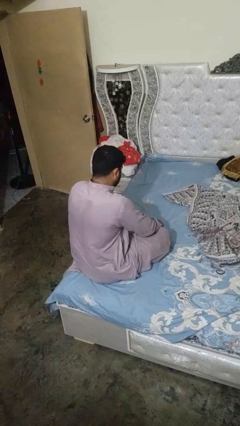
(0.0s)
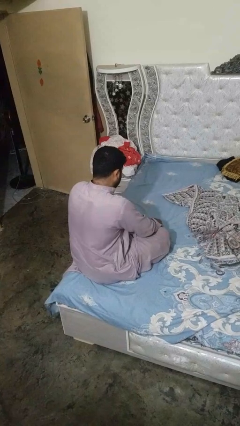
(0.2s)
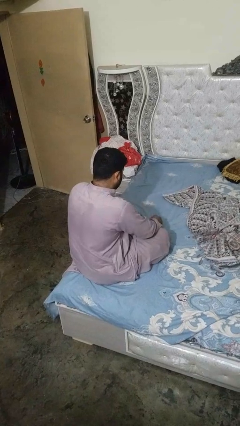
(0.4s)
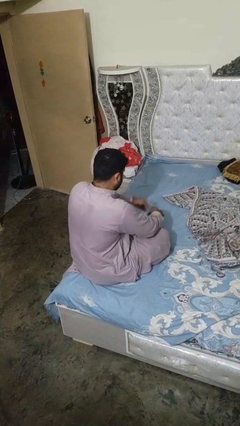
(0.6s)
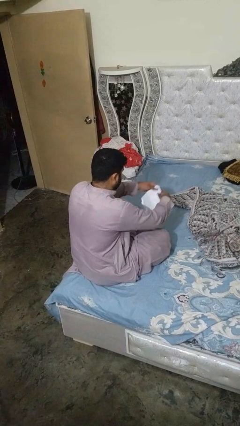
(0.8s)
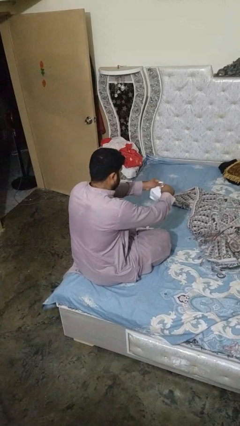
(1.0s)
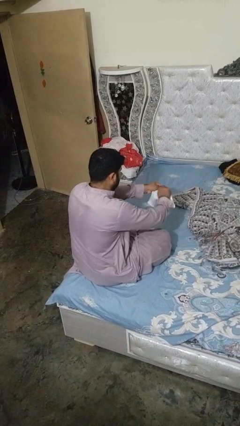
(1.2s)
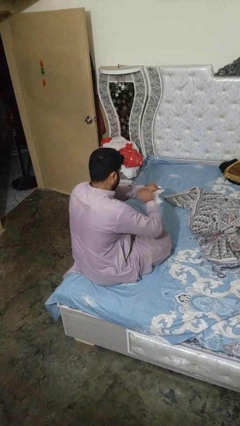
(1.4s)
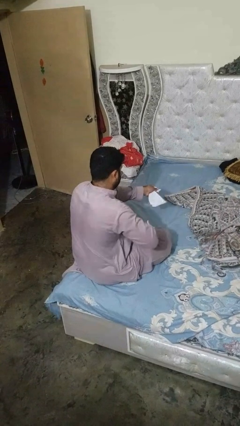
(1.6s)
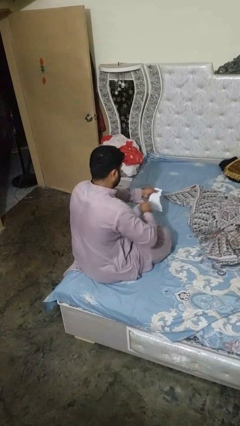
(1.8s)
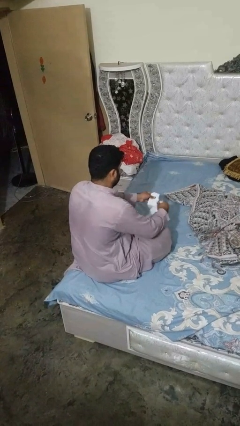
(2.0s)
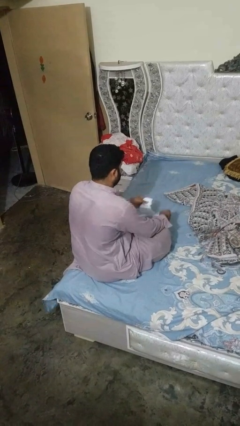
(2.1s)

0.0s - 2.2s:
person tears paper

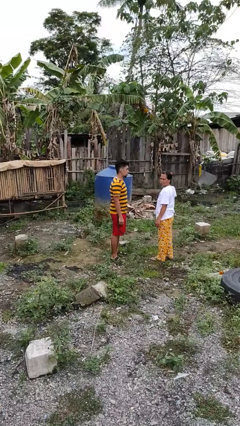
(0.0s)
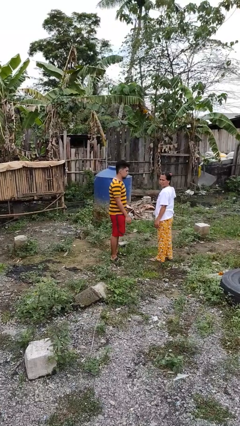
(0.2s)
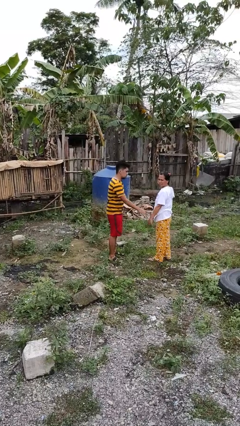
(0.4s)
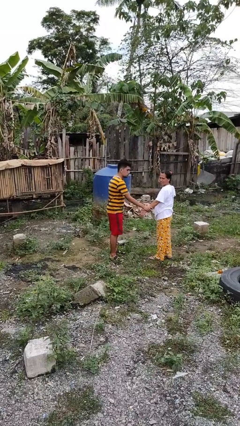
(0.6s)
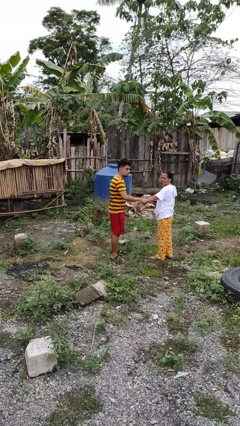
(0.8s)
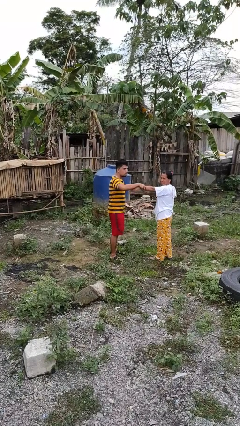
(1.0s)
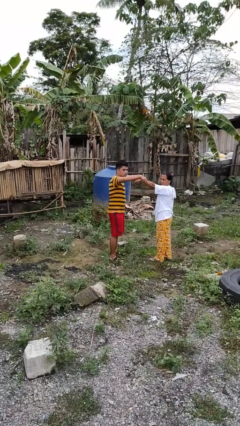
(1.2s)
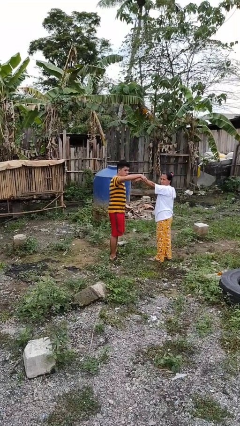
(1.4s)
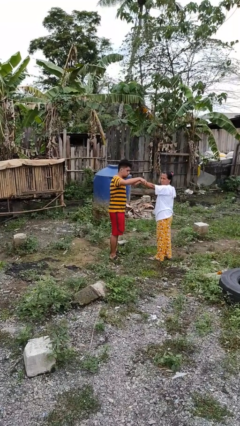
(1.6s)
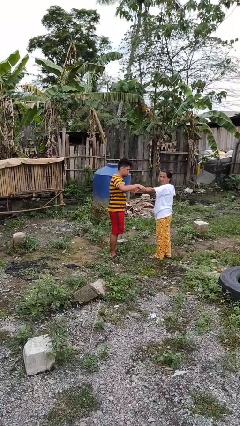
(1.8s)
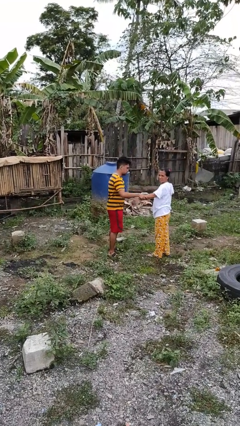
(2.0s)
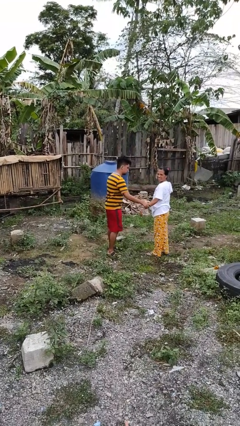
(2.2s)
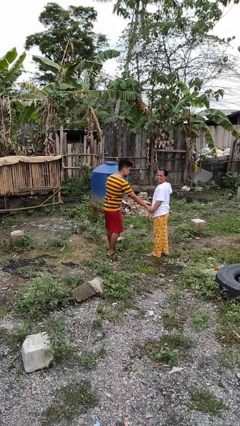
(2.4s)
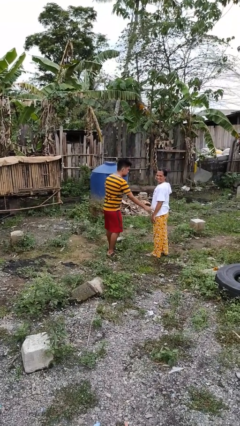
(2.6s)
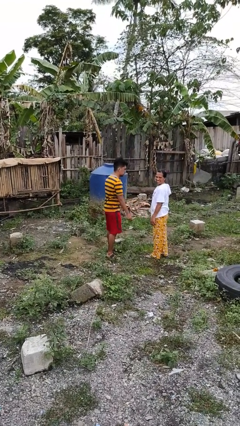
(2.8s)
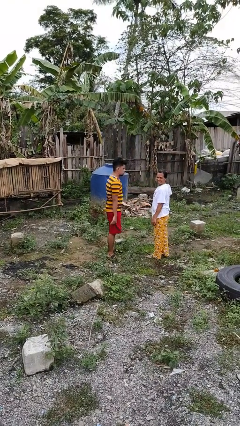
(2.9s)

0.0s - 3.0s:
person grabs person by forearm

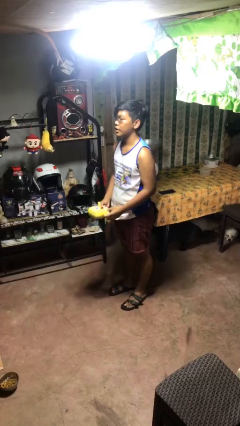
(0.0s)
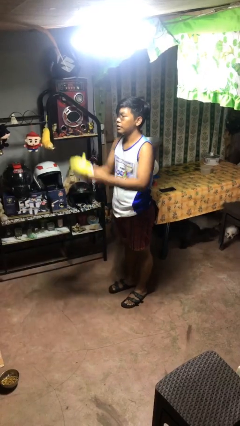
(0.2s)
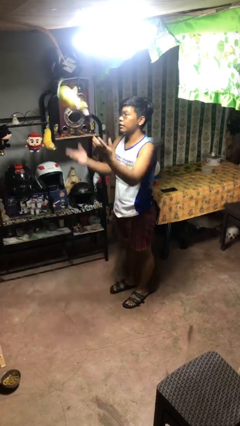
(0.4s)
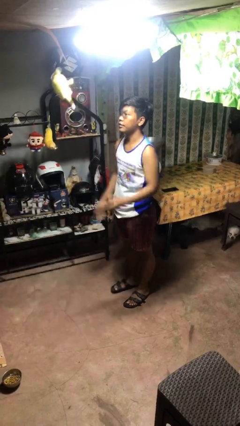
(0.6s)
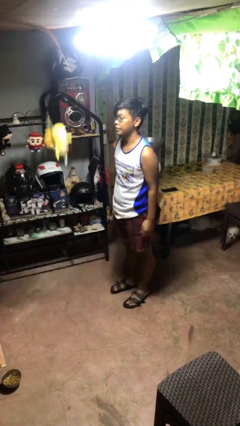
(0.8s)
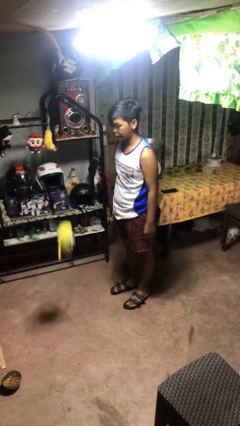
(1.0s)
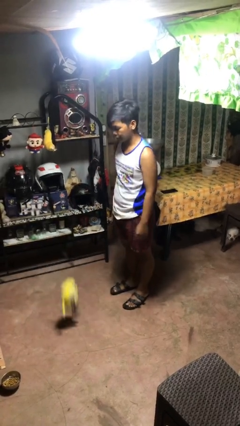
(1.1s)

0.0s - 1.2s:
person throws object into air

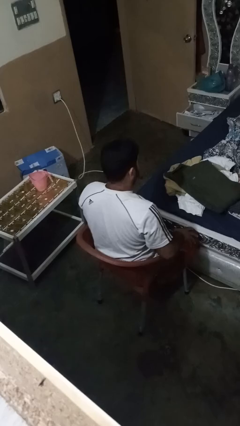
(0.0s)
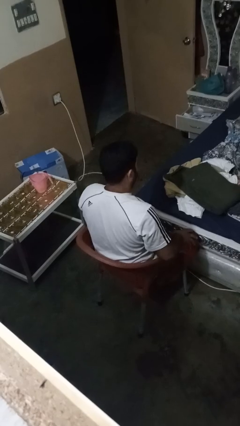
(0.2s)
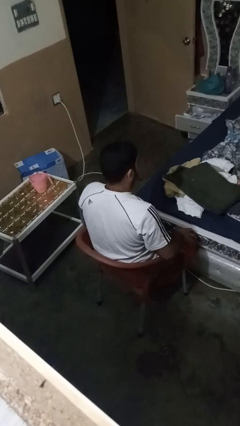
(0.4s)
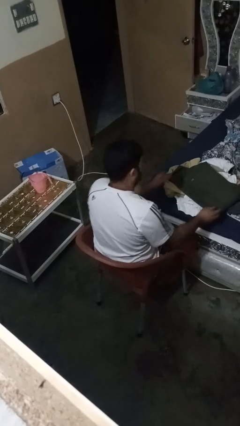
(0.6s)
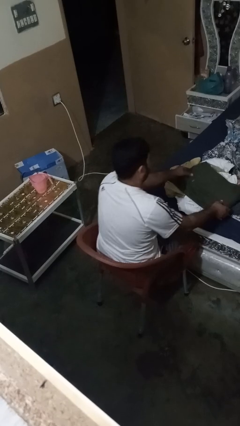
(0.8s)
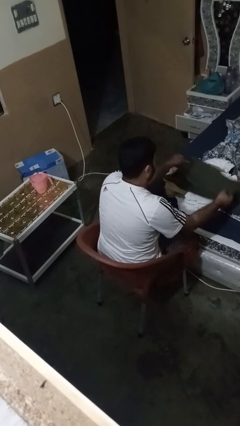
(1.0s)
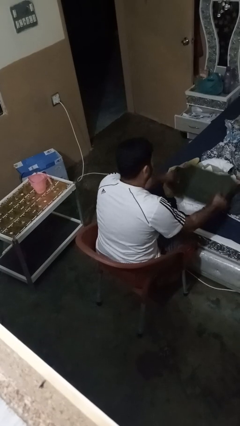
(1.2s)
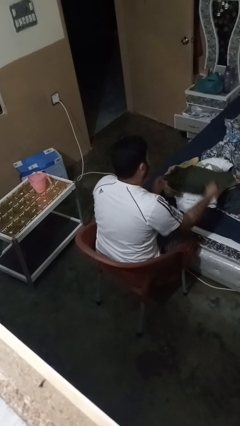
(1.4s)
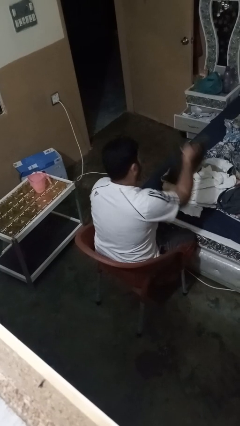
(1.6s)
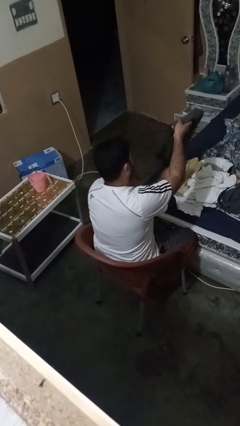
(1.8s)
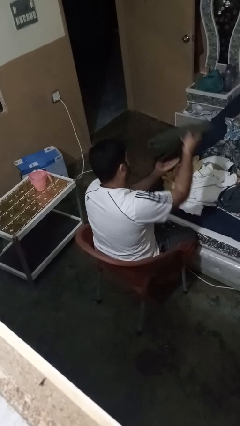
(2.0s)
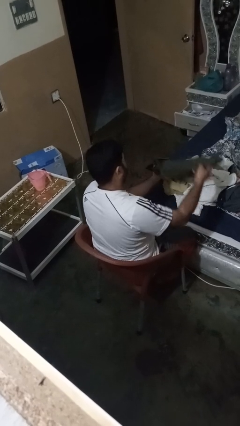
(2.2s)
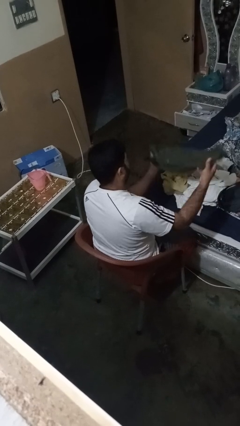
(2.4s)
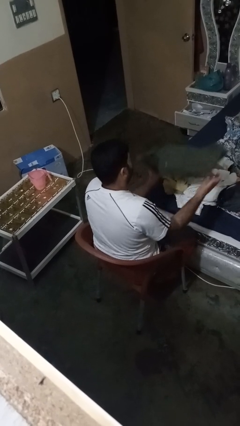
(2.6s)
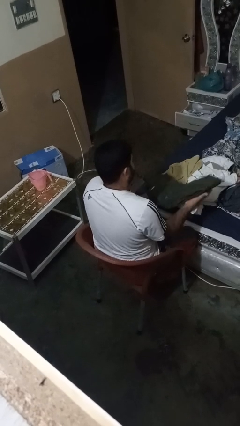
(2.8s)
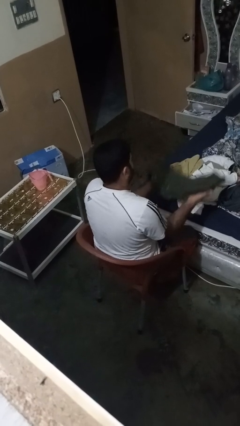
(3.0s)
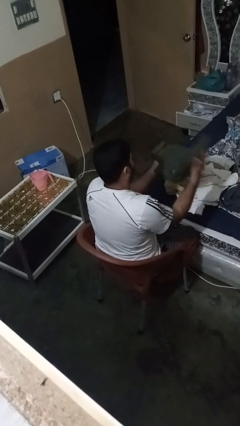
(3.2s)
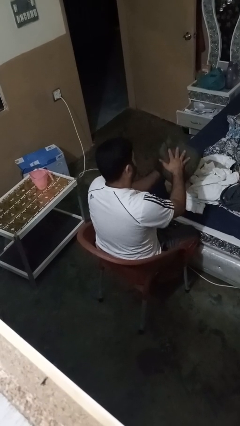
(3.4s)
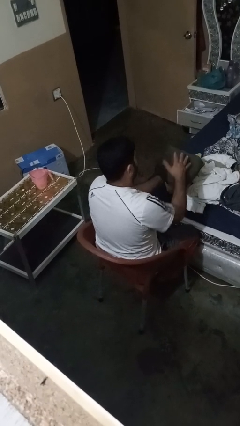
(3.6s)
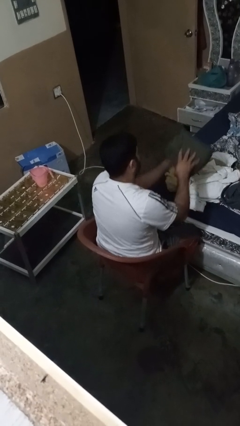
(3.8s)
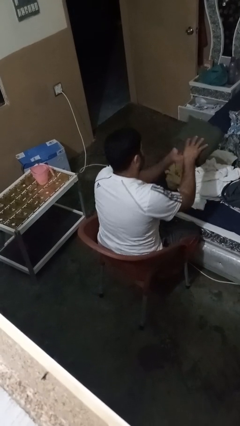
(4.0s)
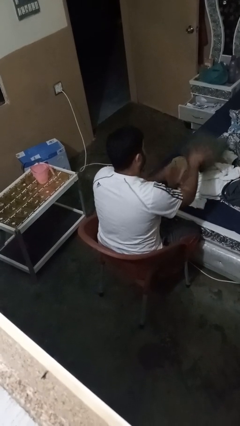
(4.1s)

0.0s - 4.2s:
person folds pants

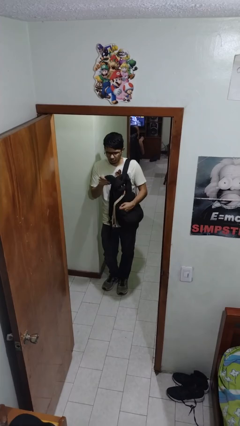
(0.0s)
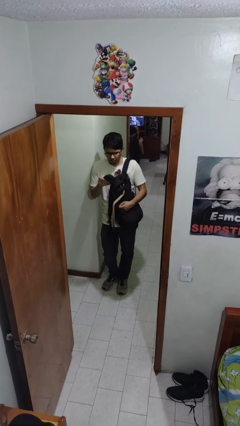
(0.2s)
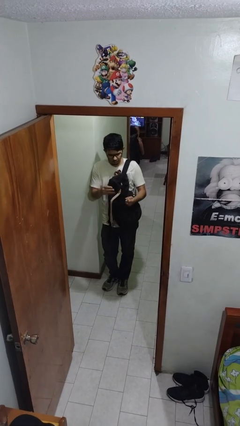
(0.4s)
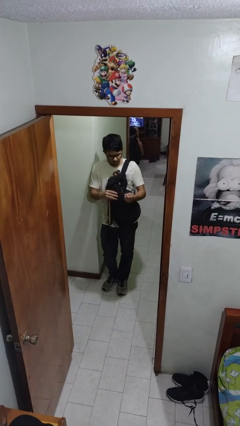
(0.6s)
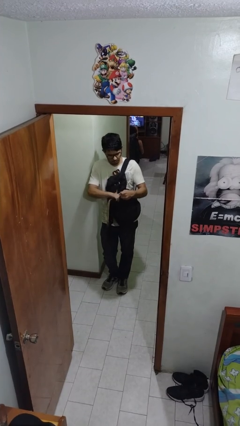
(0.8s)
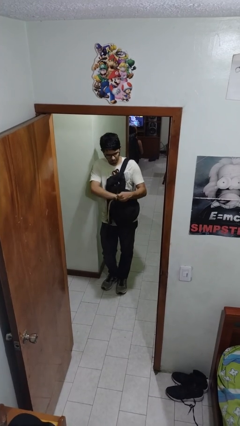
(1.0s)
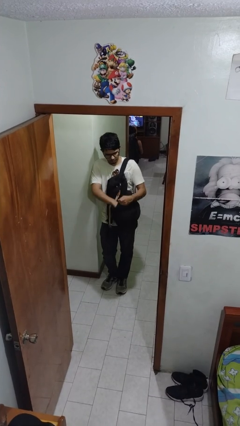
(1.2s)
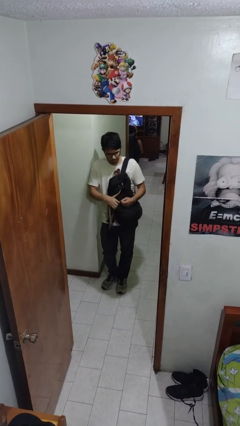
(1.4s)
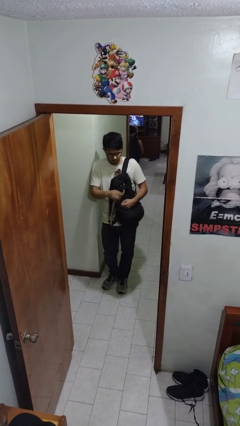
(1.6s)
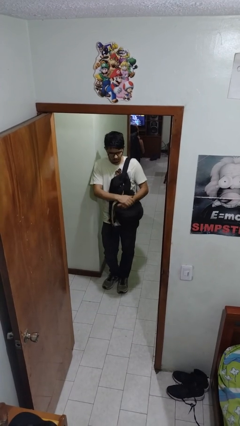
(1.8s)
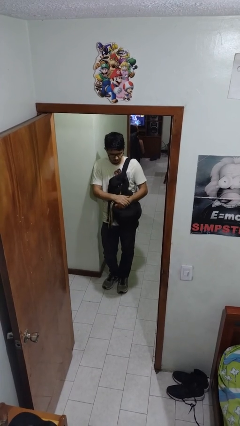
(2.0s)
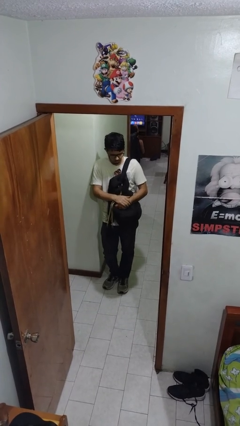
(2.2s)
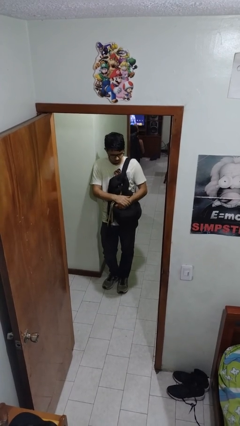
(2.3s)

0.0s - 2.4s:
person puts object into backpack

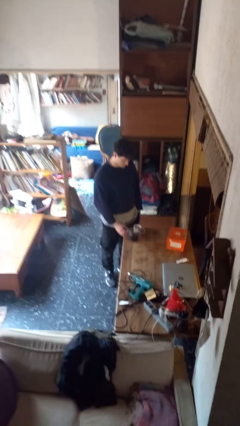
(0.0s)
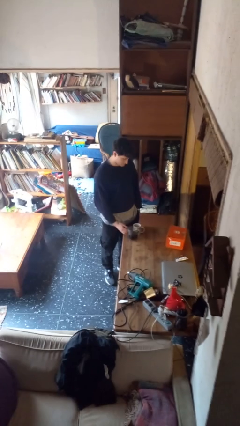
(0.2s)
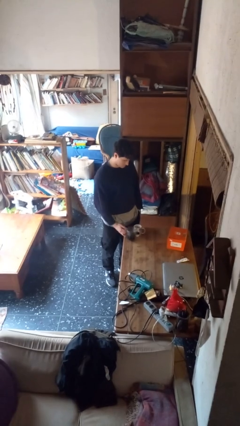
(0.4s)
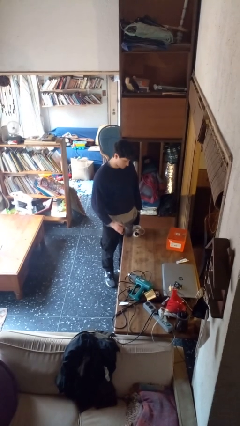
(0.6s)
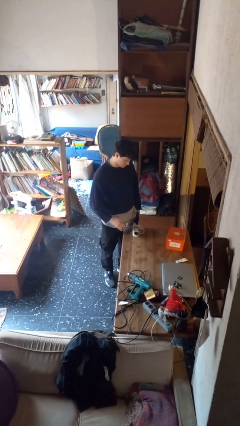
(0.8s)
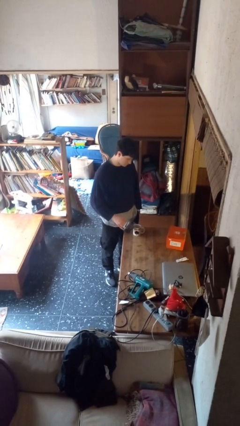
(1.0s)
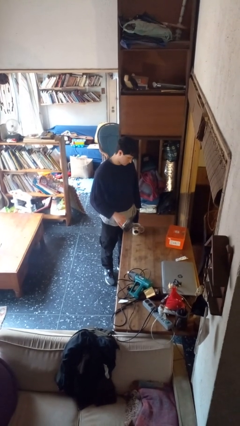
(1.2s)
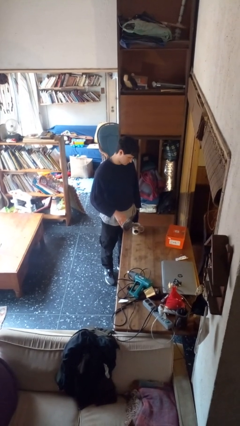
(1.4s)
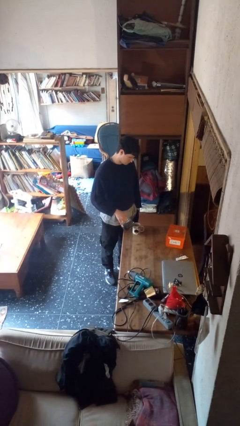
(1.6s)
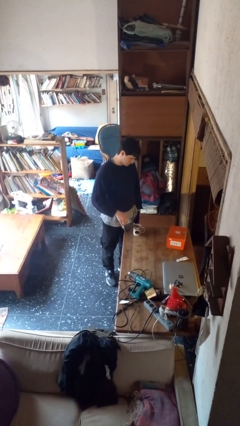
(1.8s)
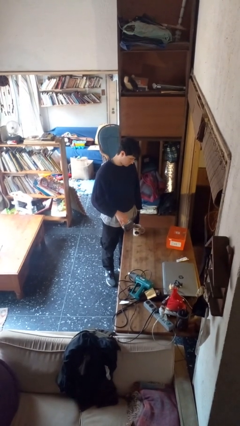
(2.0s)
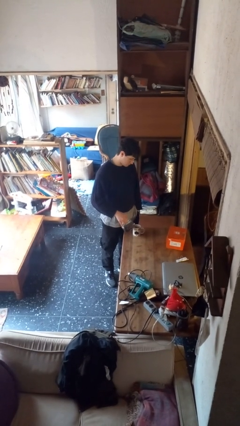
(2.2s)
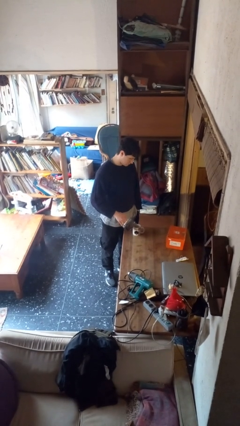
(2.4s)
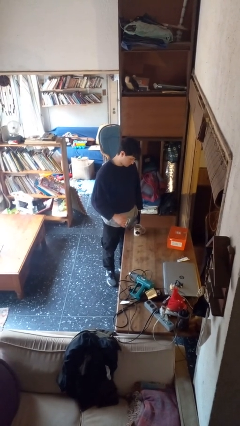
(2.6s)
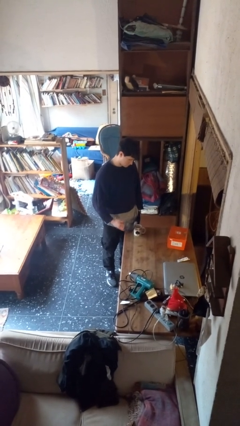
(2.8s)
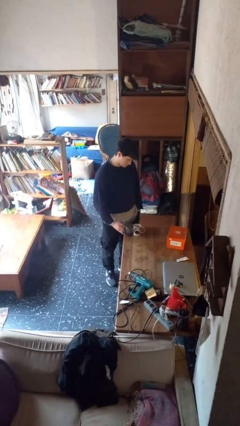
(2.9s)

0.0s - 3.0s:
person pours coffee into mug

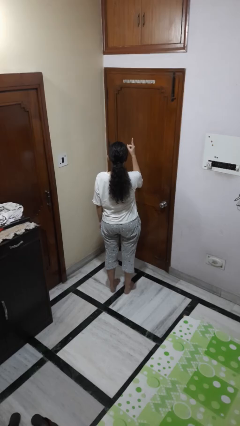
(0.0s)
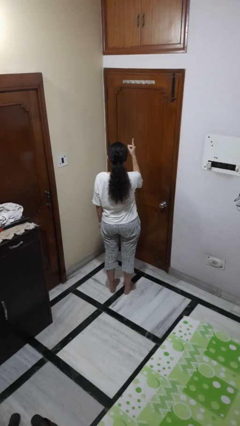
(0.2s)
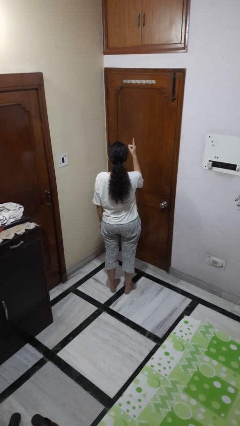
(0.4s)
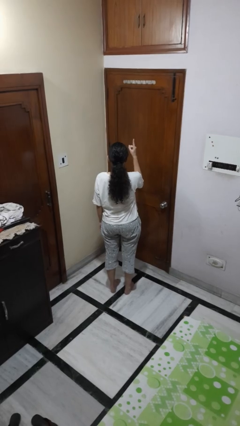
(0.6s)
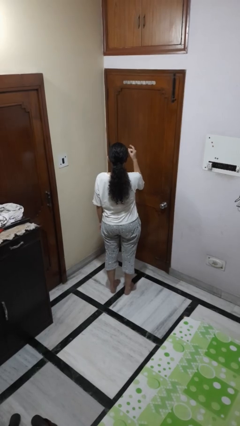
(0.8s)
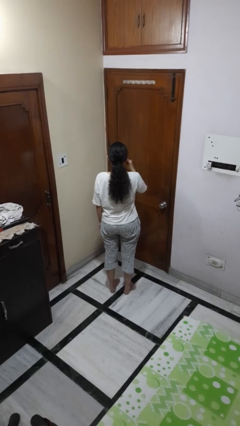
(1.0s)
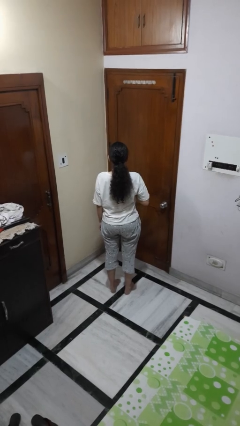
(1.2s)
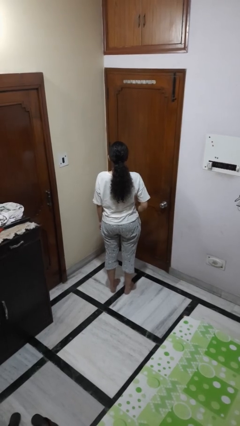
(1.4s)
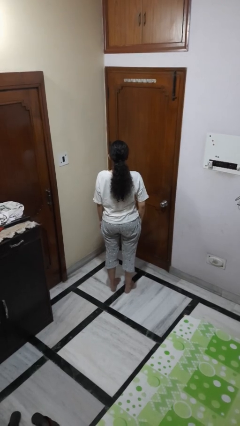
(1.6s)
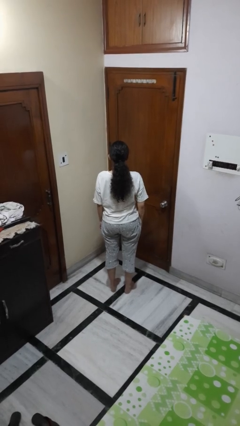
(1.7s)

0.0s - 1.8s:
person gestures number one
